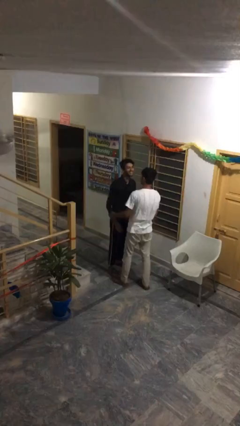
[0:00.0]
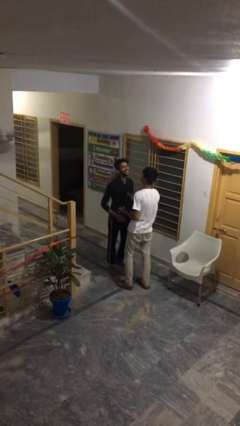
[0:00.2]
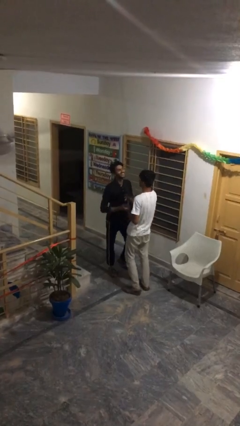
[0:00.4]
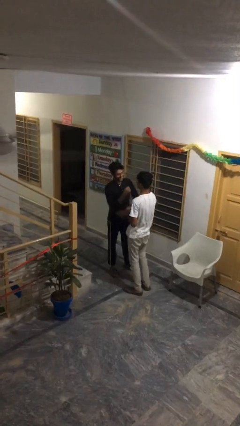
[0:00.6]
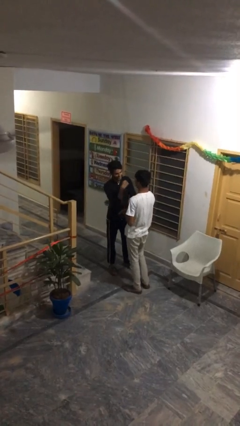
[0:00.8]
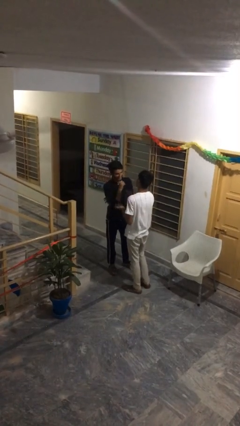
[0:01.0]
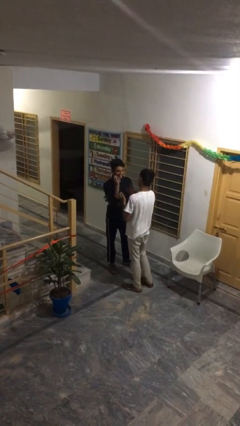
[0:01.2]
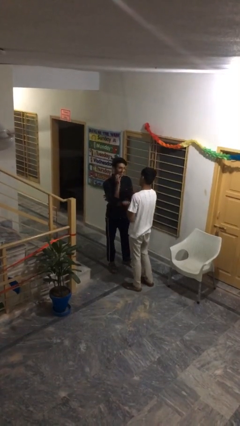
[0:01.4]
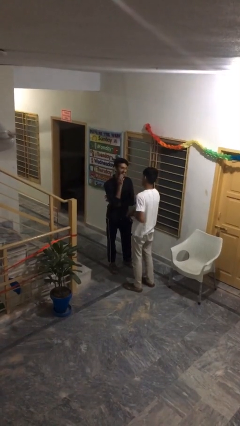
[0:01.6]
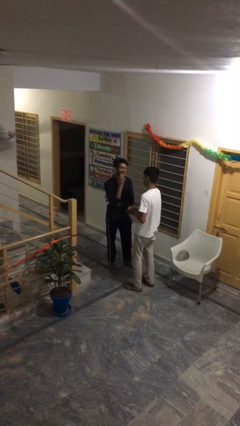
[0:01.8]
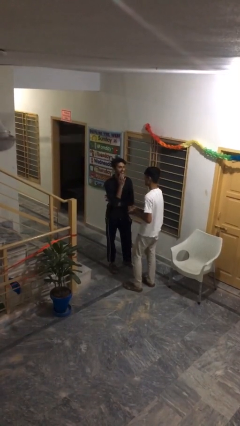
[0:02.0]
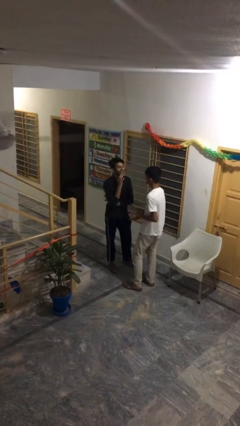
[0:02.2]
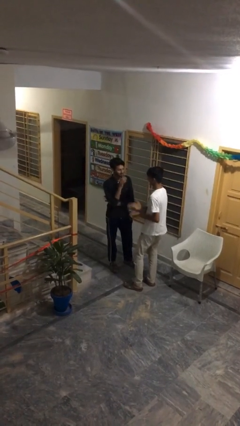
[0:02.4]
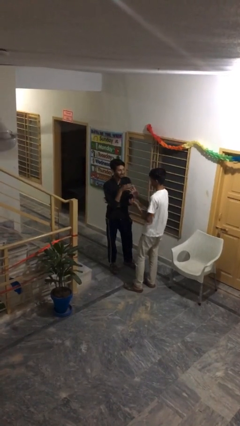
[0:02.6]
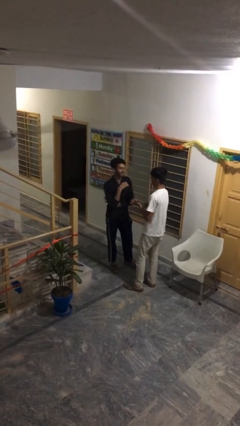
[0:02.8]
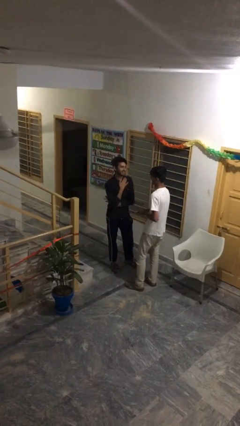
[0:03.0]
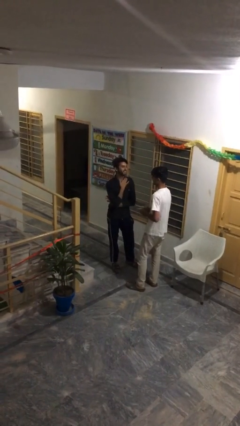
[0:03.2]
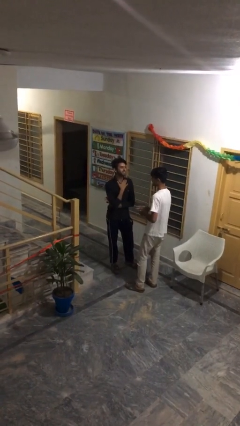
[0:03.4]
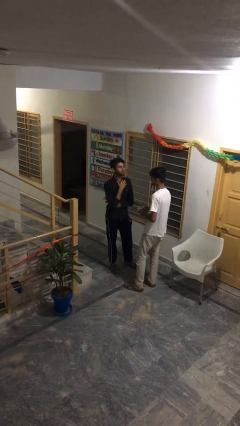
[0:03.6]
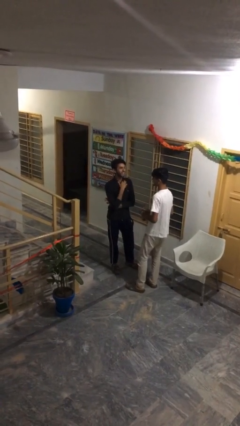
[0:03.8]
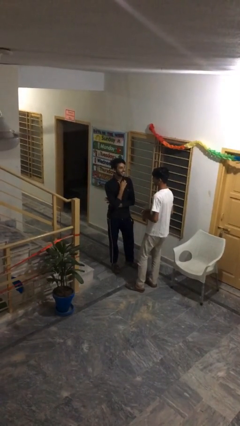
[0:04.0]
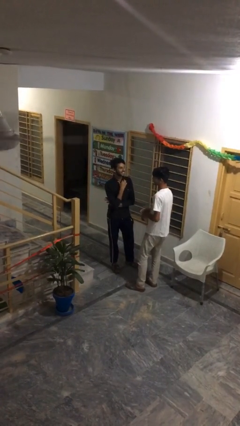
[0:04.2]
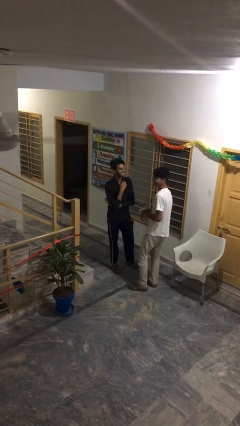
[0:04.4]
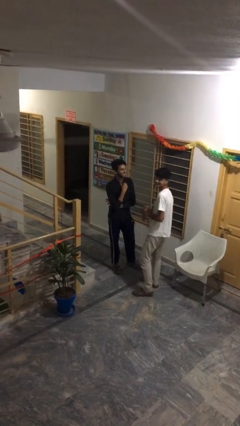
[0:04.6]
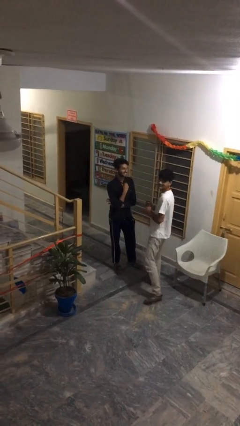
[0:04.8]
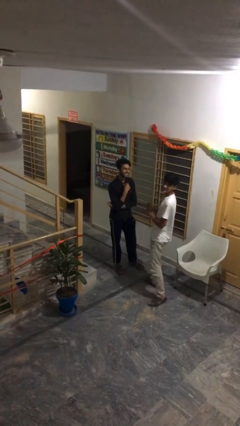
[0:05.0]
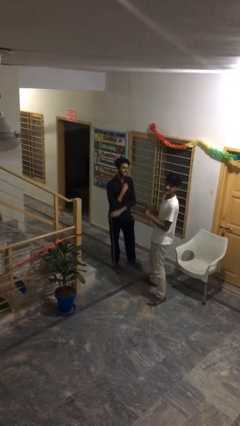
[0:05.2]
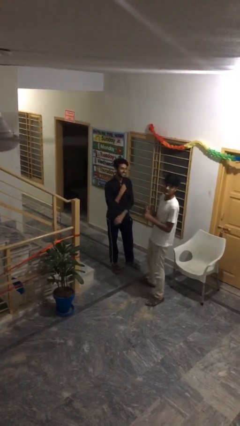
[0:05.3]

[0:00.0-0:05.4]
person talks to person

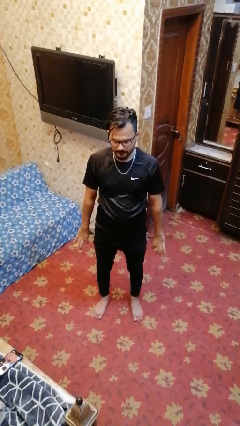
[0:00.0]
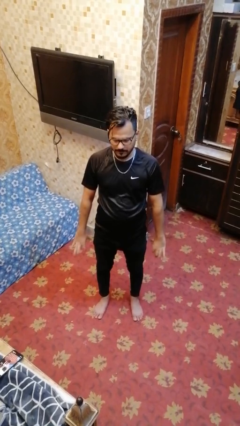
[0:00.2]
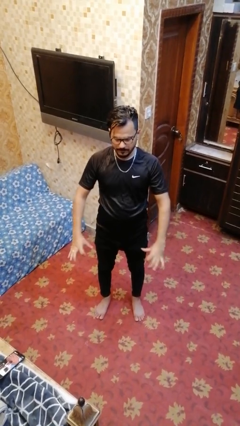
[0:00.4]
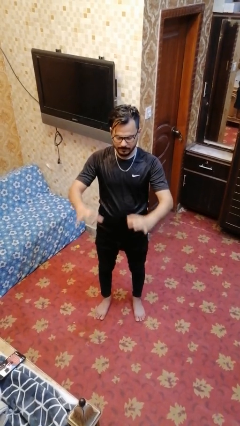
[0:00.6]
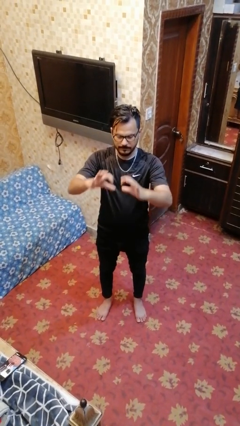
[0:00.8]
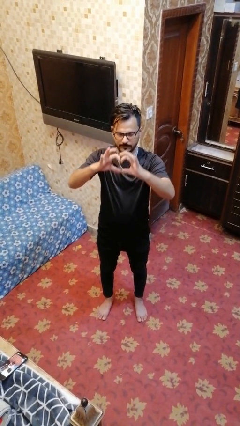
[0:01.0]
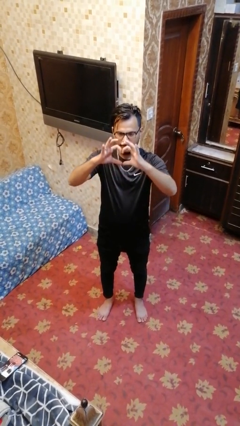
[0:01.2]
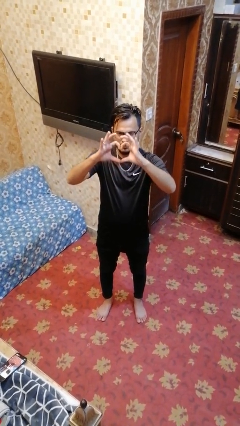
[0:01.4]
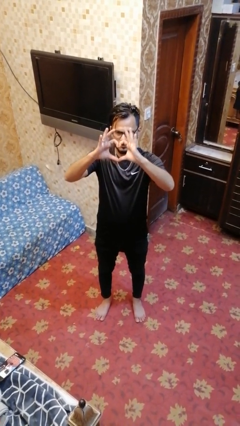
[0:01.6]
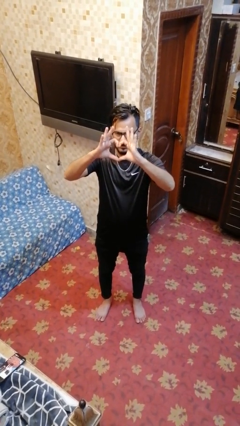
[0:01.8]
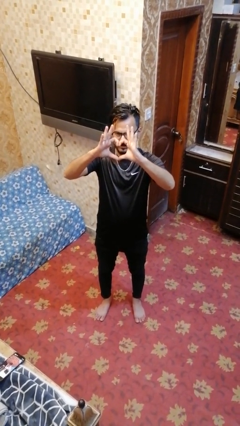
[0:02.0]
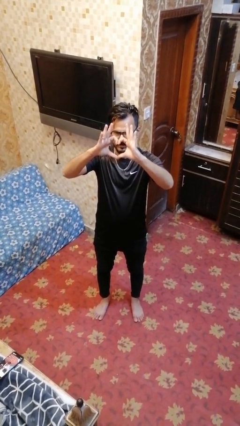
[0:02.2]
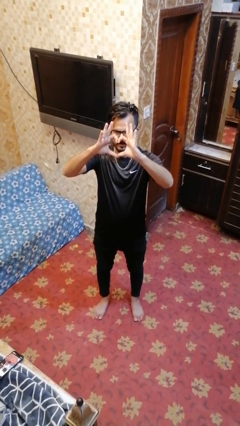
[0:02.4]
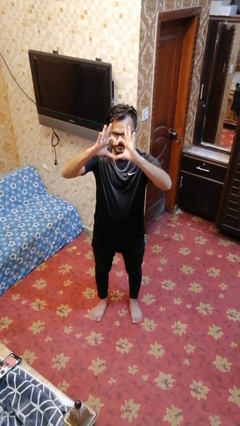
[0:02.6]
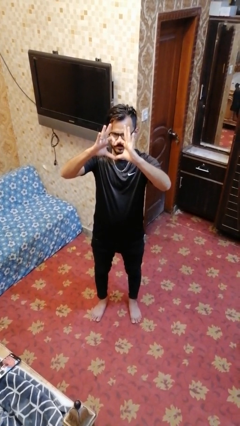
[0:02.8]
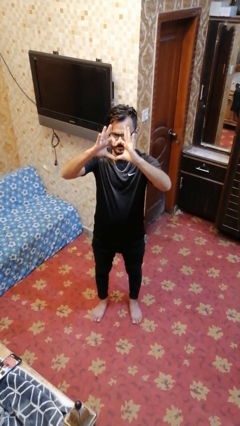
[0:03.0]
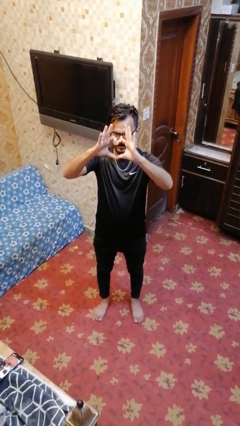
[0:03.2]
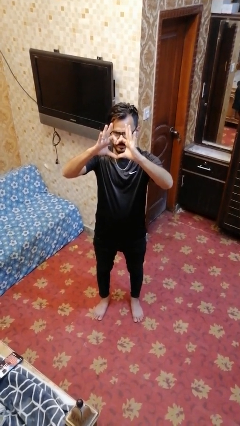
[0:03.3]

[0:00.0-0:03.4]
person gestures heart

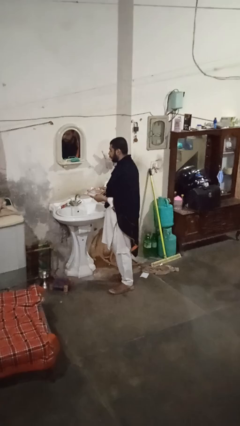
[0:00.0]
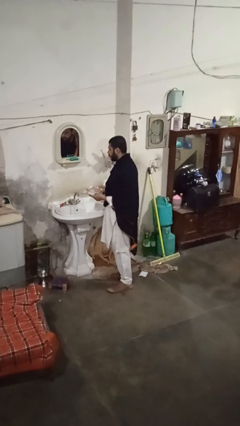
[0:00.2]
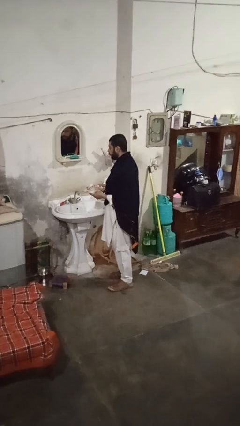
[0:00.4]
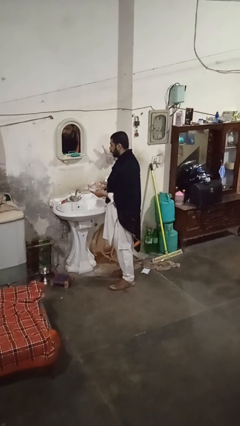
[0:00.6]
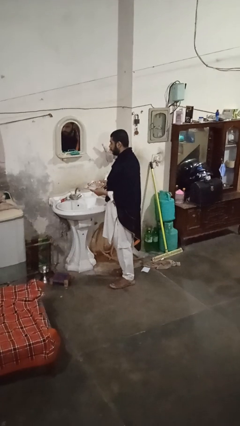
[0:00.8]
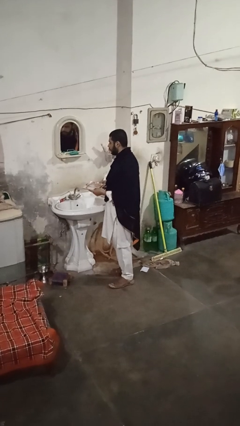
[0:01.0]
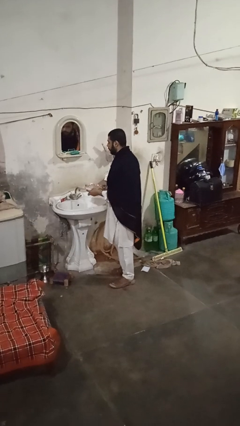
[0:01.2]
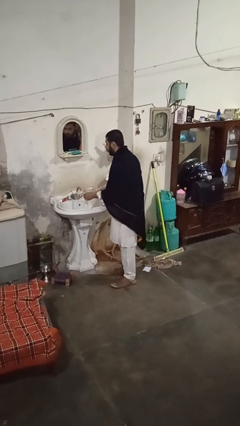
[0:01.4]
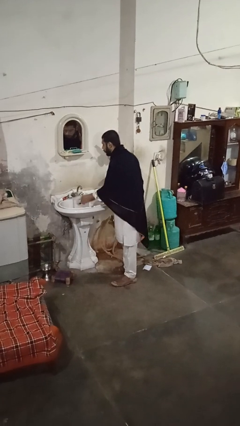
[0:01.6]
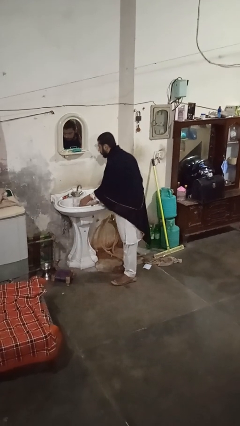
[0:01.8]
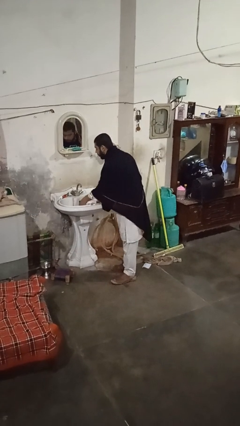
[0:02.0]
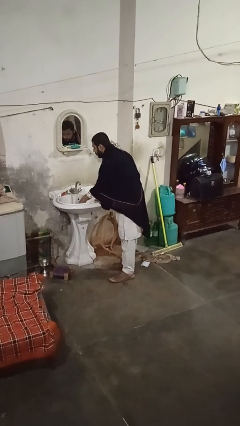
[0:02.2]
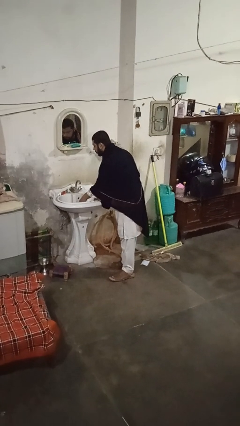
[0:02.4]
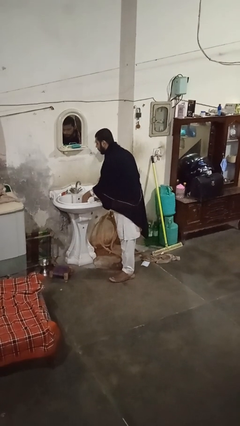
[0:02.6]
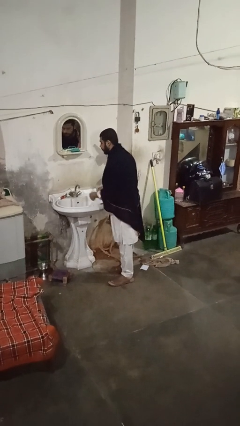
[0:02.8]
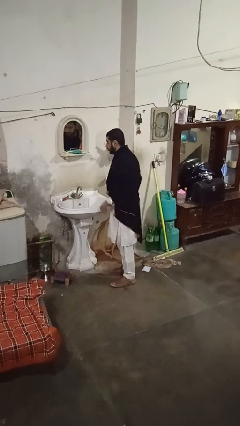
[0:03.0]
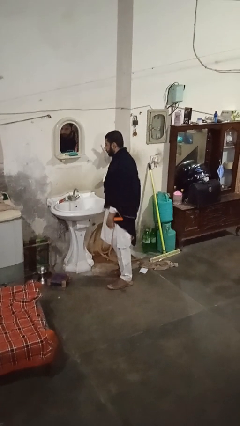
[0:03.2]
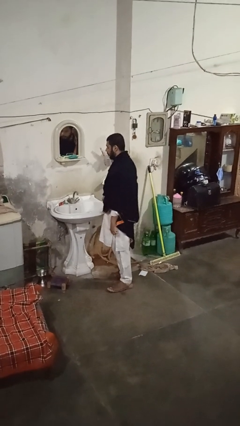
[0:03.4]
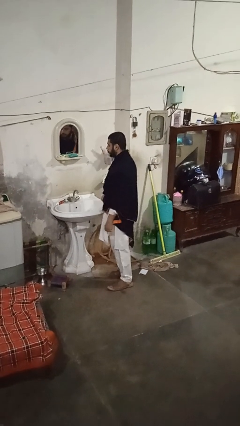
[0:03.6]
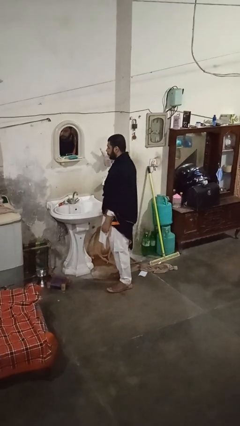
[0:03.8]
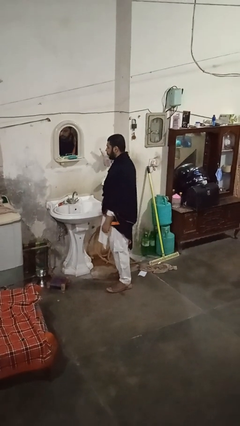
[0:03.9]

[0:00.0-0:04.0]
person loads dishwasher

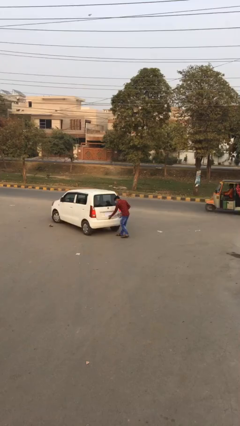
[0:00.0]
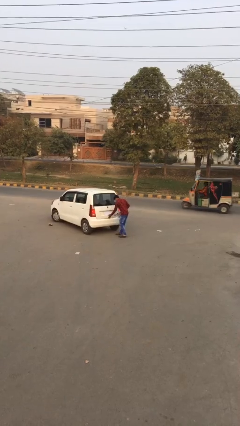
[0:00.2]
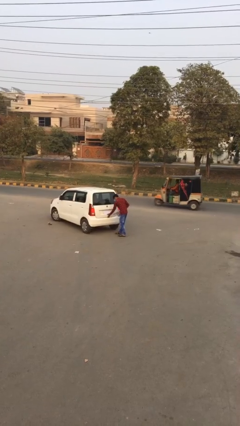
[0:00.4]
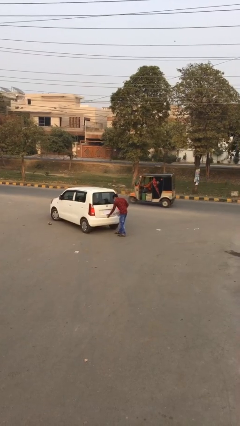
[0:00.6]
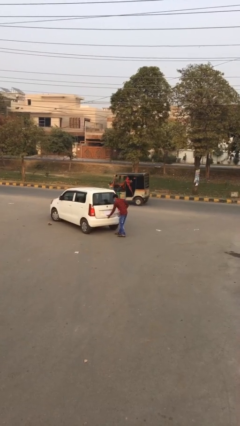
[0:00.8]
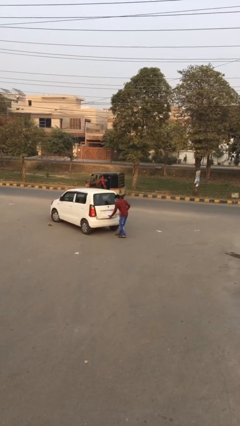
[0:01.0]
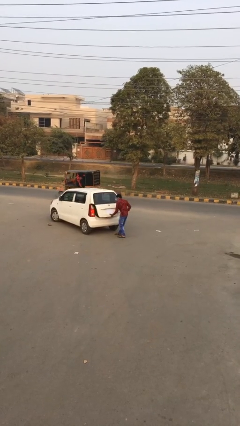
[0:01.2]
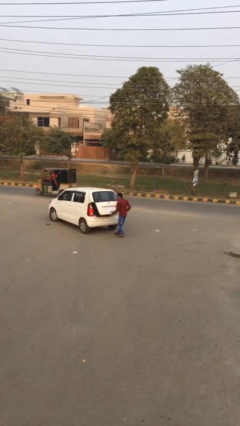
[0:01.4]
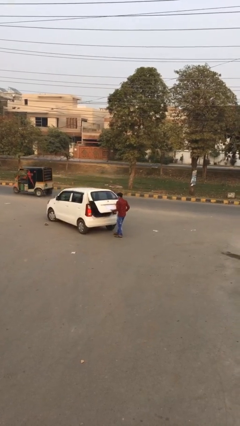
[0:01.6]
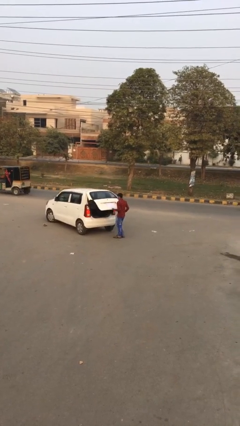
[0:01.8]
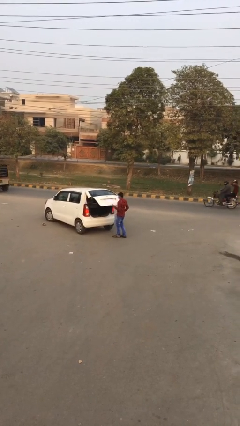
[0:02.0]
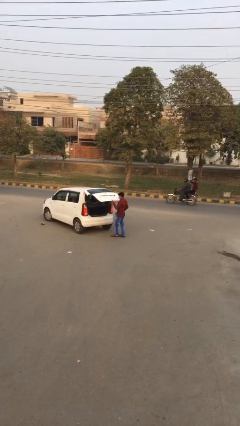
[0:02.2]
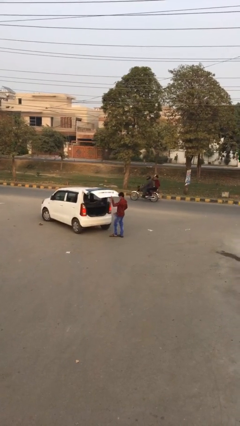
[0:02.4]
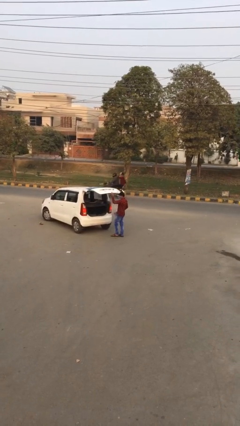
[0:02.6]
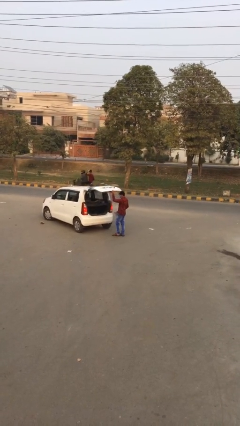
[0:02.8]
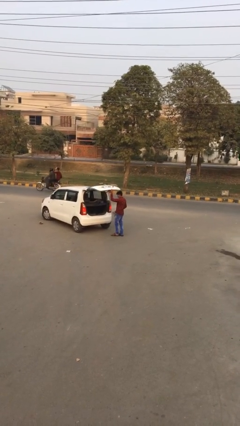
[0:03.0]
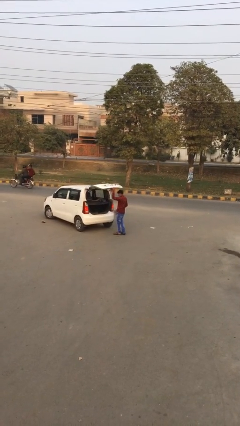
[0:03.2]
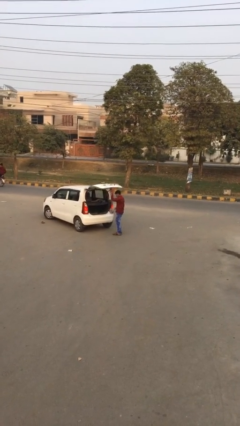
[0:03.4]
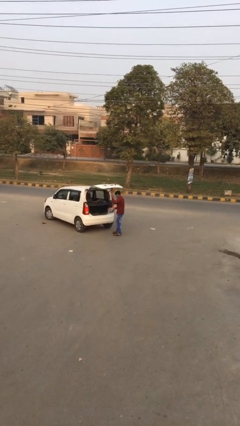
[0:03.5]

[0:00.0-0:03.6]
person opens car trunk

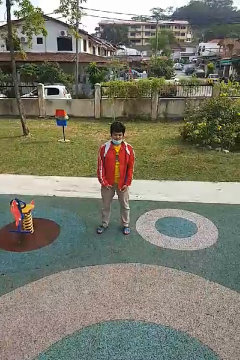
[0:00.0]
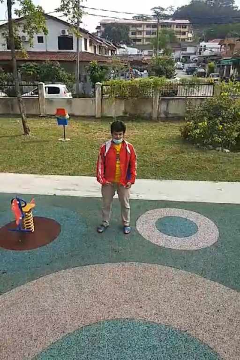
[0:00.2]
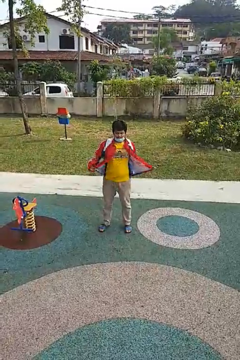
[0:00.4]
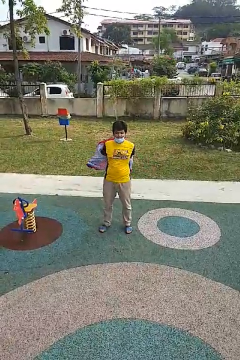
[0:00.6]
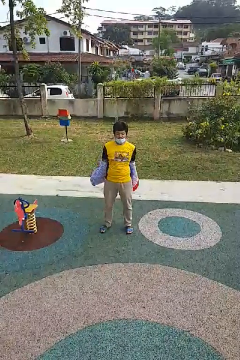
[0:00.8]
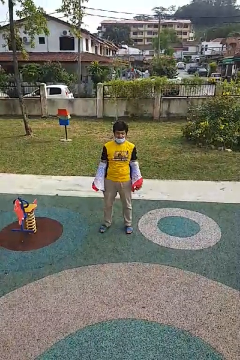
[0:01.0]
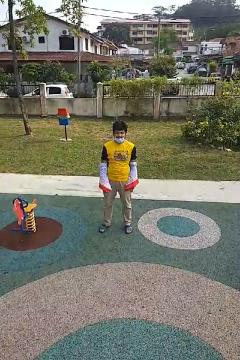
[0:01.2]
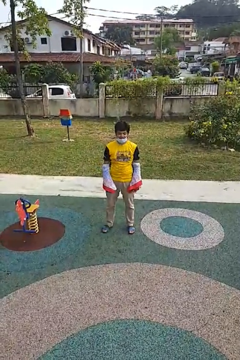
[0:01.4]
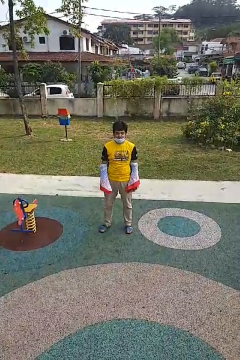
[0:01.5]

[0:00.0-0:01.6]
person takes off jacket
